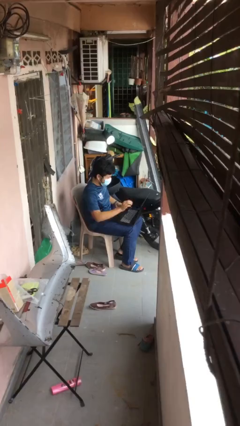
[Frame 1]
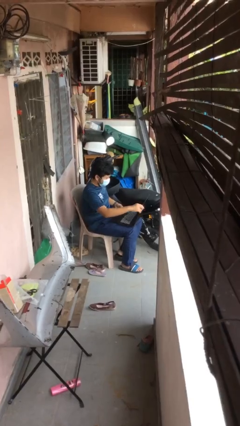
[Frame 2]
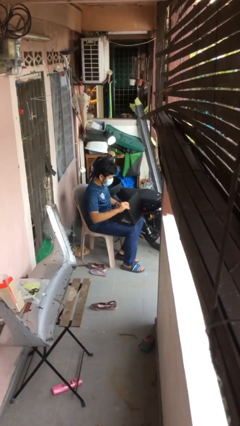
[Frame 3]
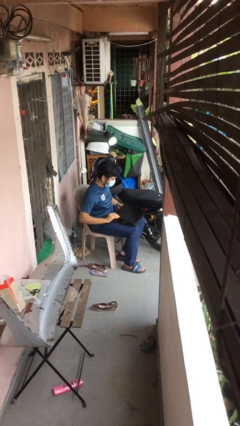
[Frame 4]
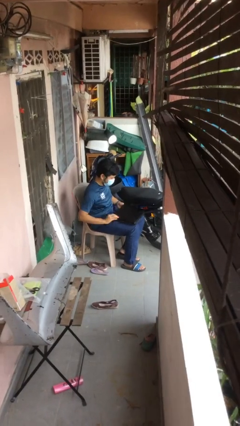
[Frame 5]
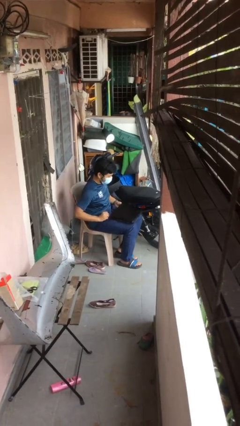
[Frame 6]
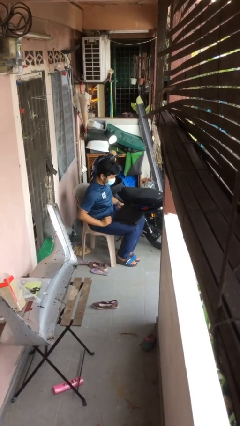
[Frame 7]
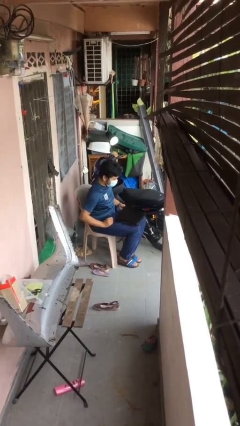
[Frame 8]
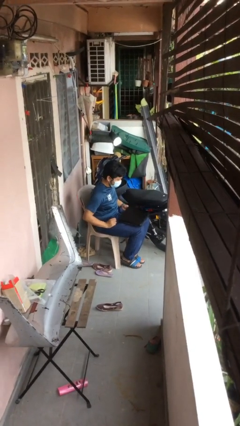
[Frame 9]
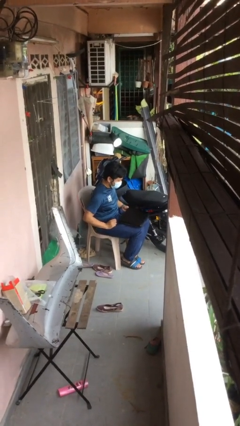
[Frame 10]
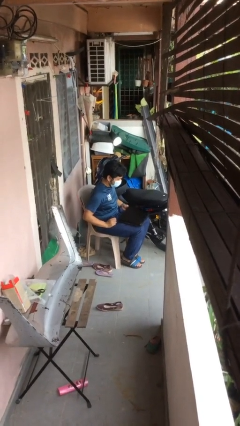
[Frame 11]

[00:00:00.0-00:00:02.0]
person closes laptop

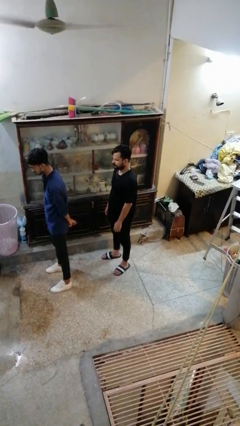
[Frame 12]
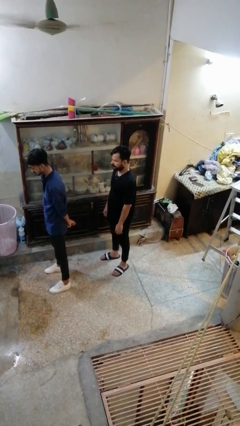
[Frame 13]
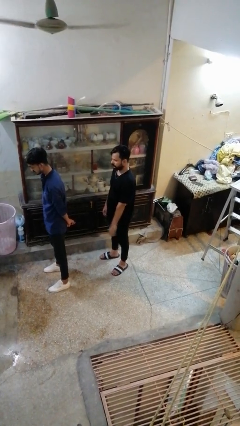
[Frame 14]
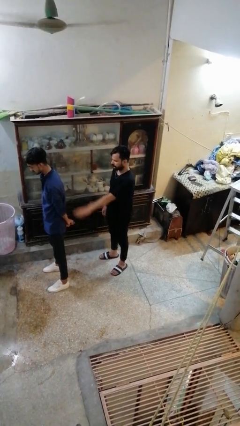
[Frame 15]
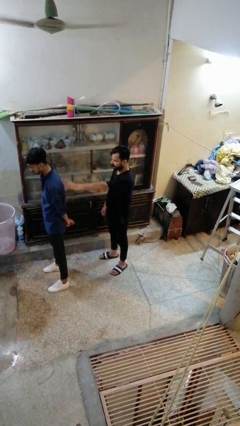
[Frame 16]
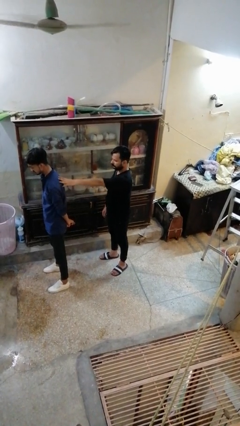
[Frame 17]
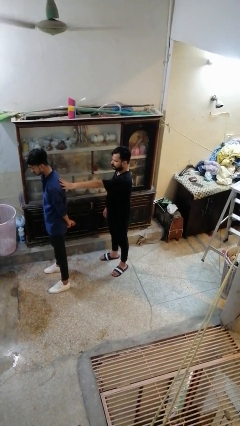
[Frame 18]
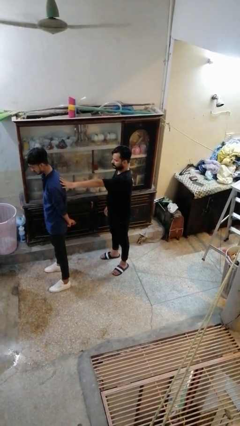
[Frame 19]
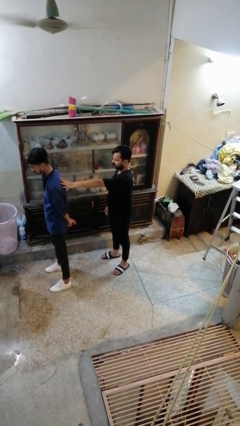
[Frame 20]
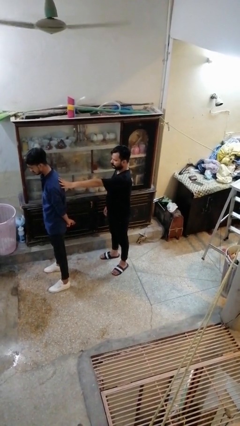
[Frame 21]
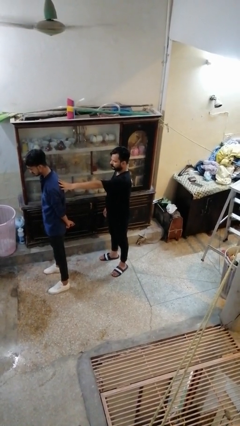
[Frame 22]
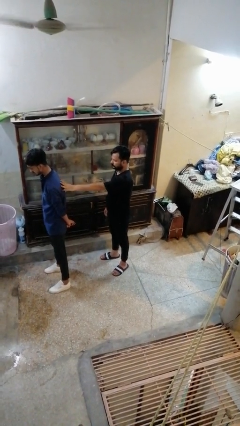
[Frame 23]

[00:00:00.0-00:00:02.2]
person touches back of person

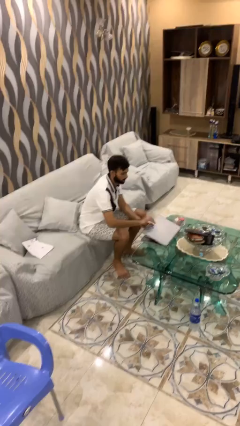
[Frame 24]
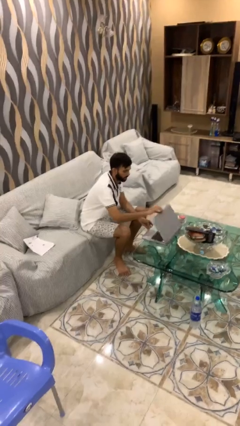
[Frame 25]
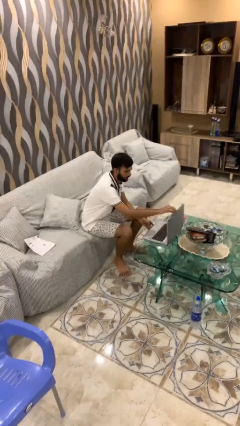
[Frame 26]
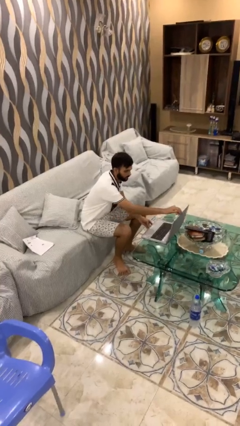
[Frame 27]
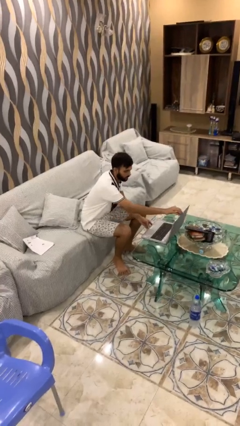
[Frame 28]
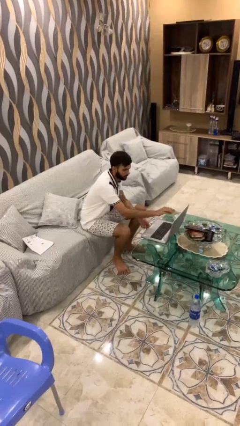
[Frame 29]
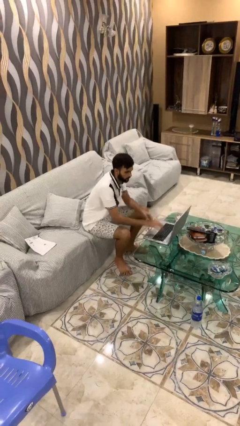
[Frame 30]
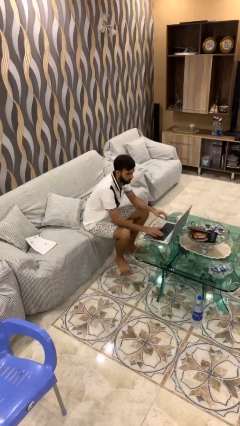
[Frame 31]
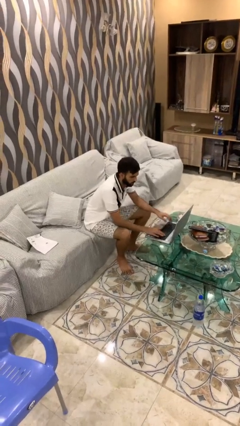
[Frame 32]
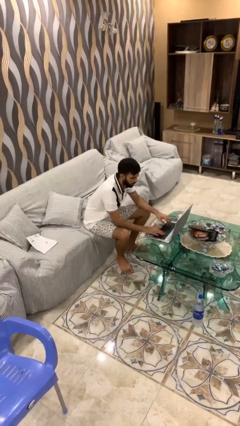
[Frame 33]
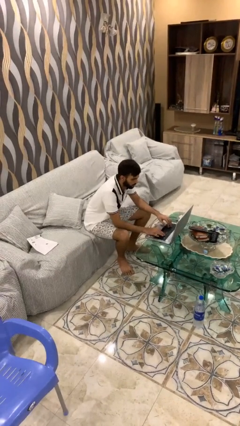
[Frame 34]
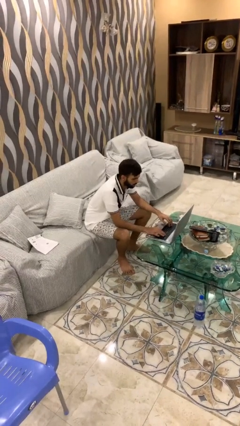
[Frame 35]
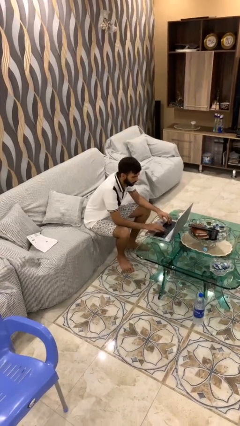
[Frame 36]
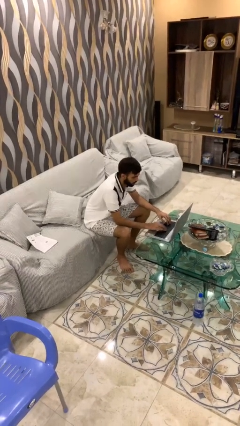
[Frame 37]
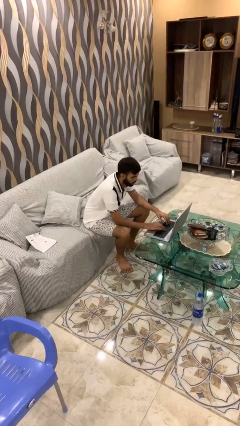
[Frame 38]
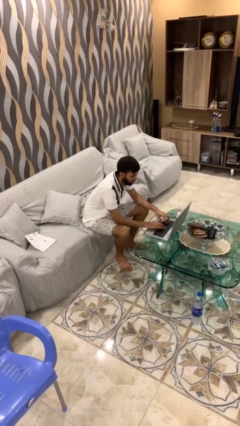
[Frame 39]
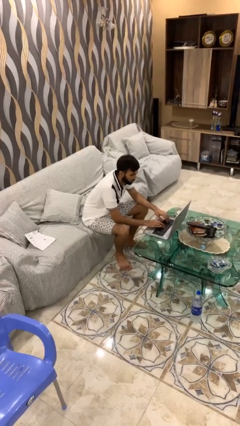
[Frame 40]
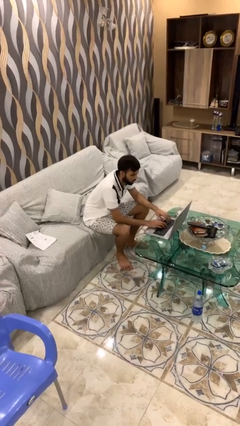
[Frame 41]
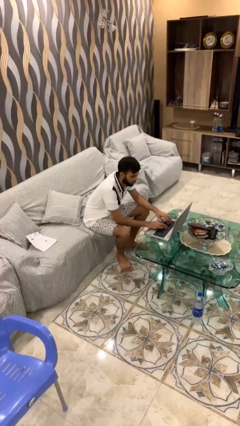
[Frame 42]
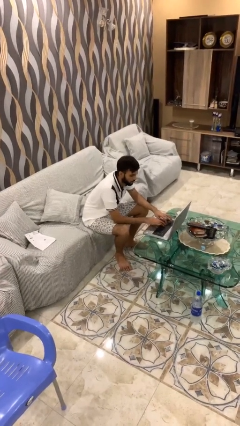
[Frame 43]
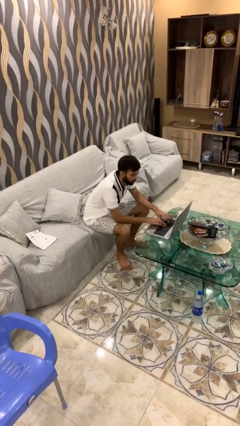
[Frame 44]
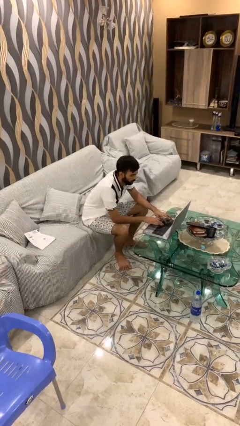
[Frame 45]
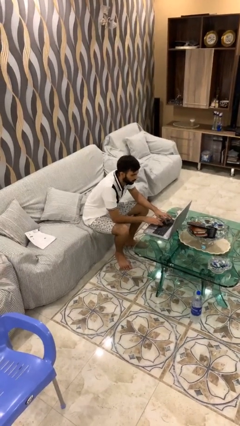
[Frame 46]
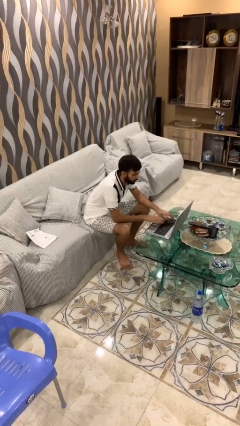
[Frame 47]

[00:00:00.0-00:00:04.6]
person interacts with laptop

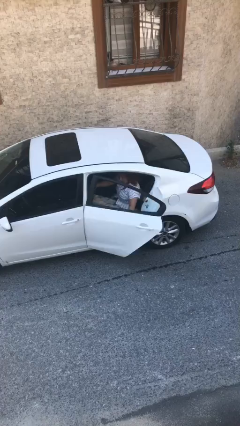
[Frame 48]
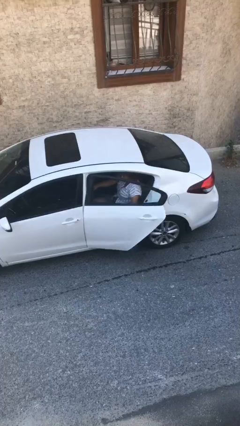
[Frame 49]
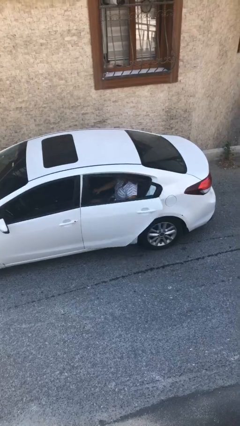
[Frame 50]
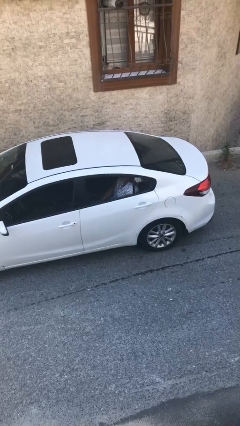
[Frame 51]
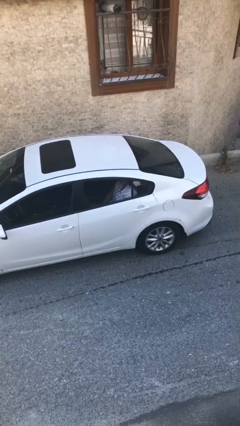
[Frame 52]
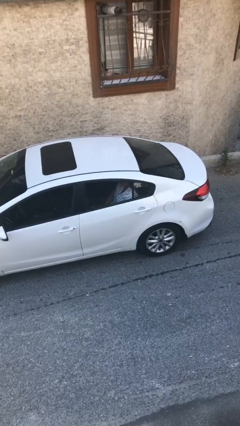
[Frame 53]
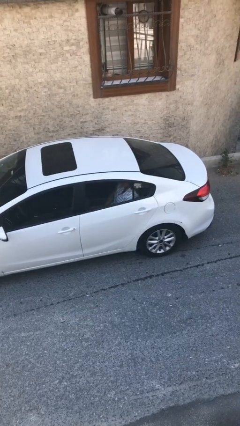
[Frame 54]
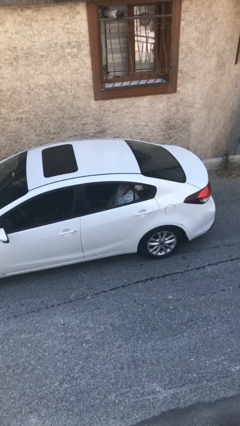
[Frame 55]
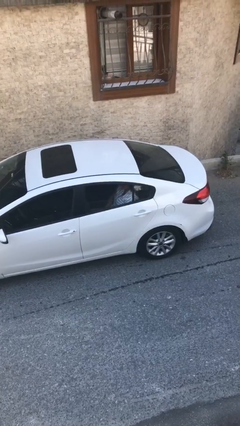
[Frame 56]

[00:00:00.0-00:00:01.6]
person closes car door

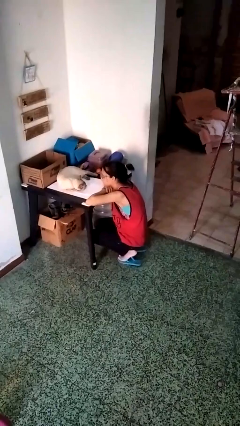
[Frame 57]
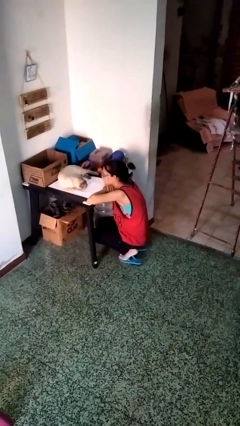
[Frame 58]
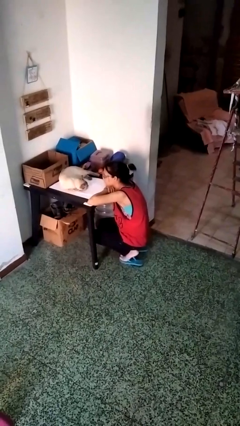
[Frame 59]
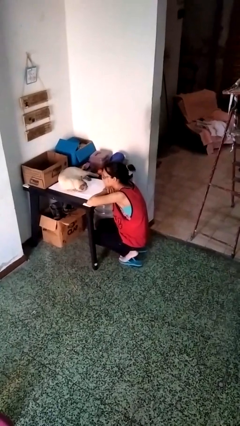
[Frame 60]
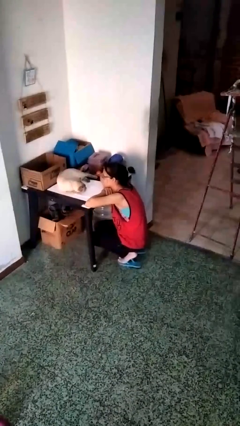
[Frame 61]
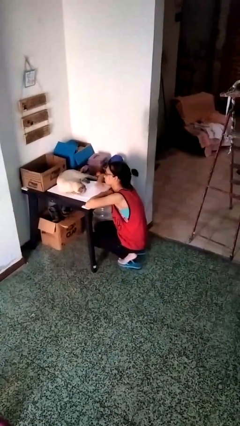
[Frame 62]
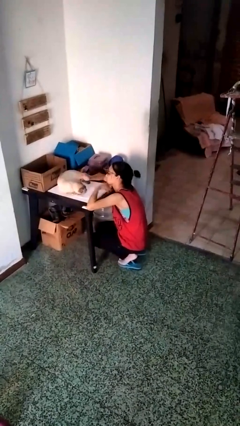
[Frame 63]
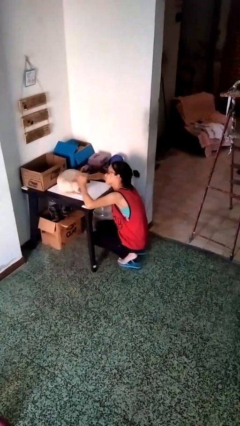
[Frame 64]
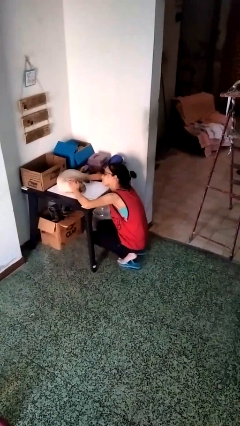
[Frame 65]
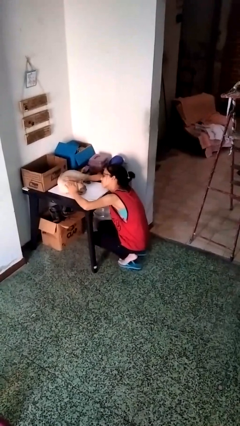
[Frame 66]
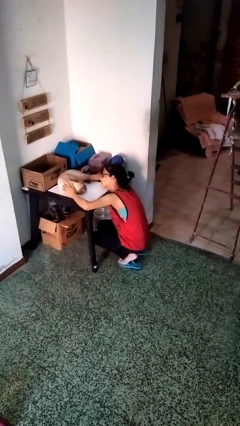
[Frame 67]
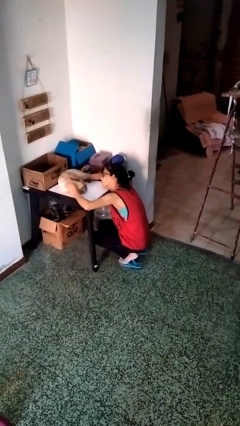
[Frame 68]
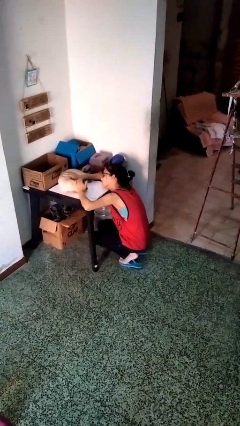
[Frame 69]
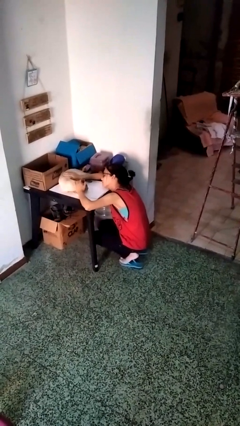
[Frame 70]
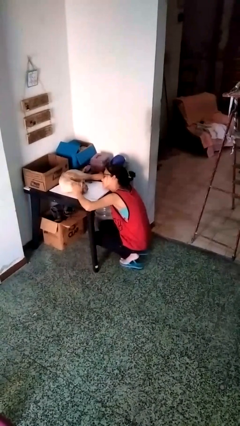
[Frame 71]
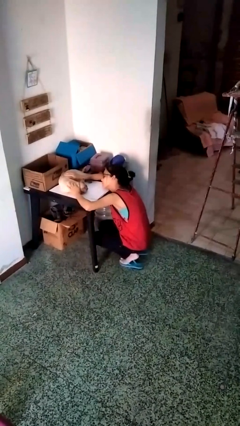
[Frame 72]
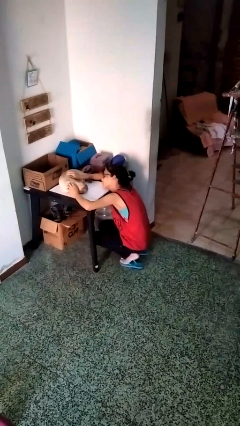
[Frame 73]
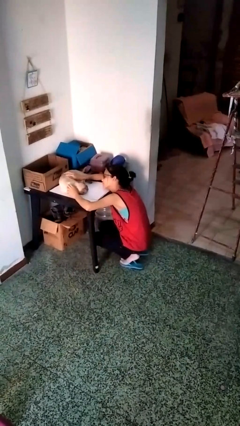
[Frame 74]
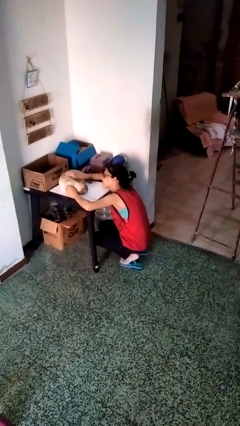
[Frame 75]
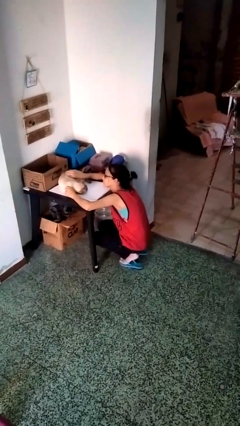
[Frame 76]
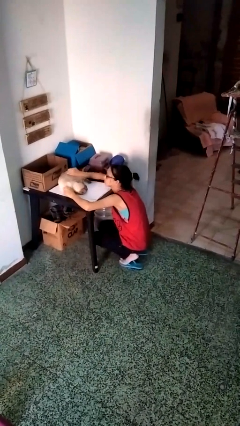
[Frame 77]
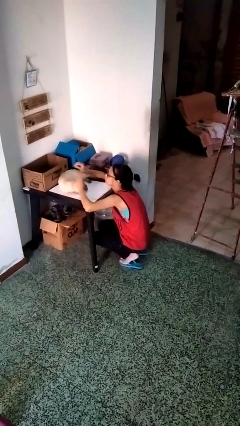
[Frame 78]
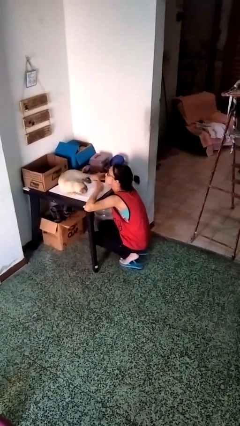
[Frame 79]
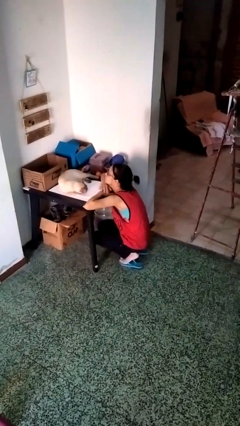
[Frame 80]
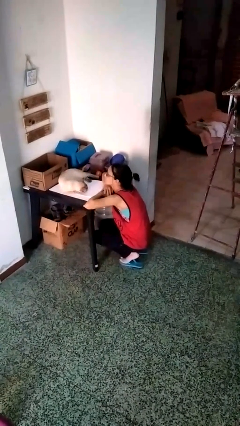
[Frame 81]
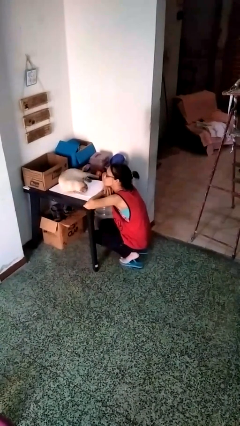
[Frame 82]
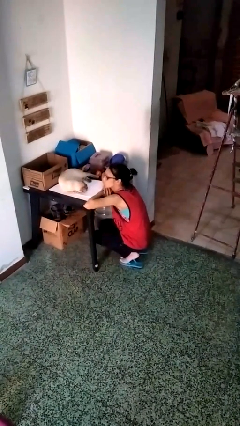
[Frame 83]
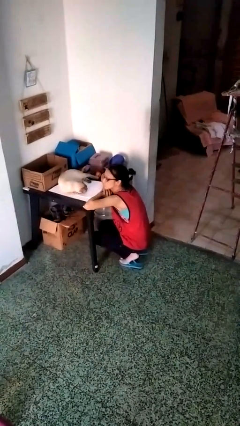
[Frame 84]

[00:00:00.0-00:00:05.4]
person pets cat

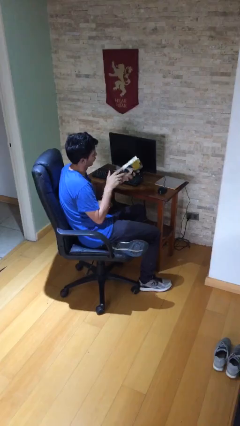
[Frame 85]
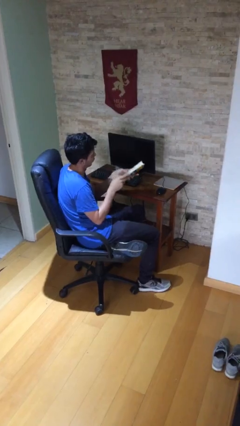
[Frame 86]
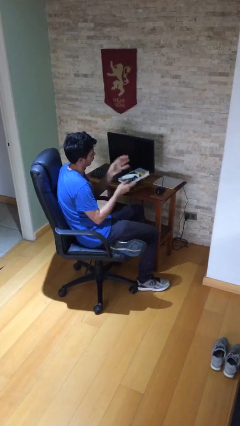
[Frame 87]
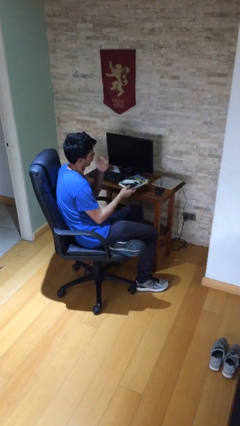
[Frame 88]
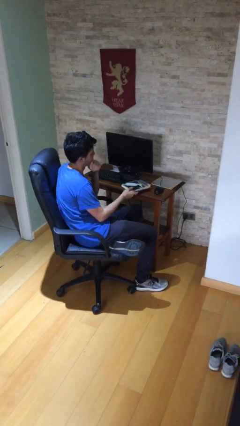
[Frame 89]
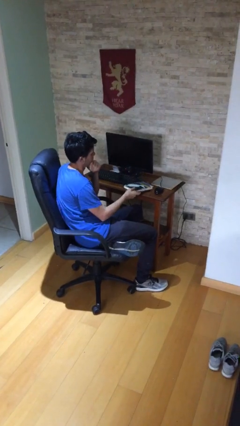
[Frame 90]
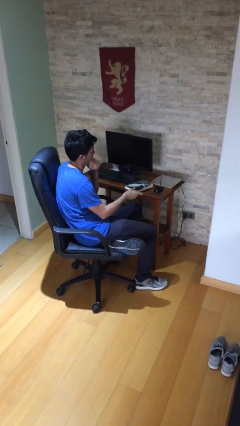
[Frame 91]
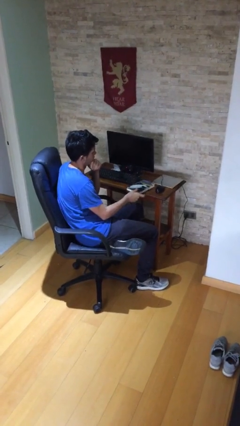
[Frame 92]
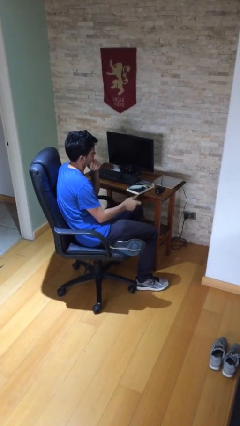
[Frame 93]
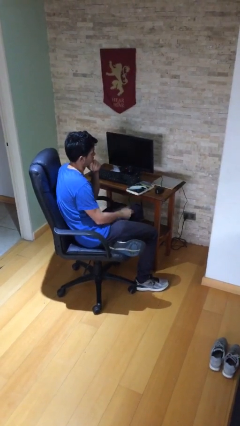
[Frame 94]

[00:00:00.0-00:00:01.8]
person puts down object on table
